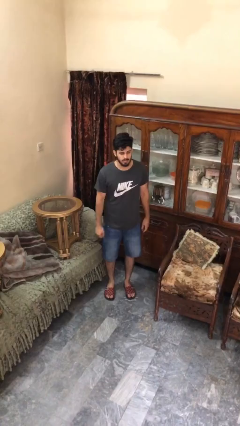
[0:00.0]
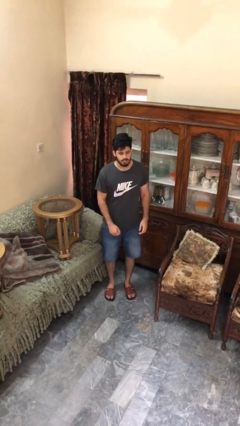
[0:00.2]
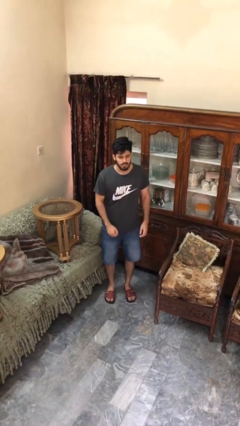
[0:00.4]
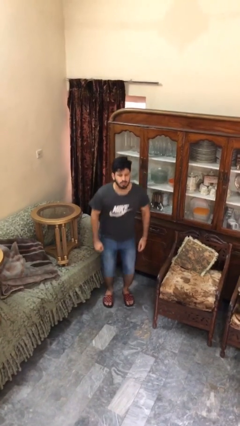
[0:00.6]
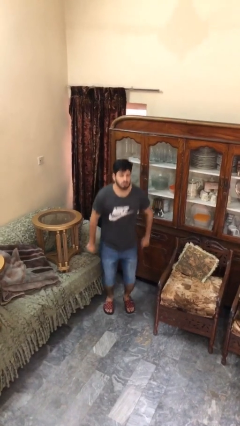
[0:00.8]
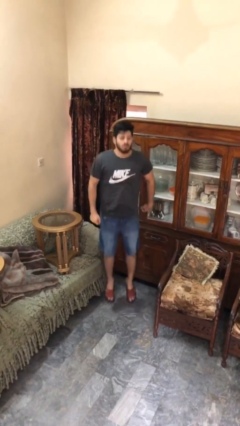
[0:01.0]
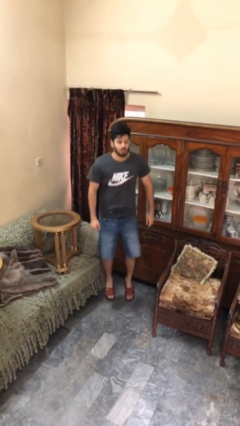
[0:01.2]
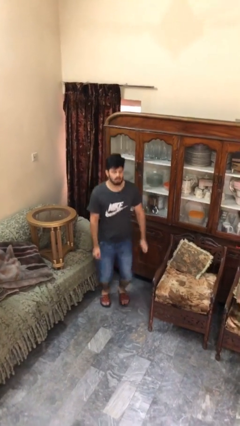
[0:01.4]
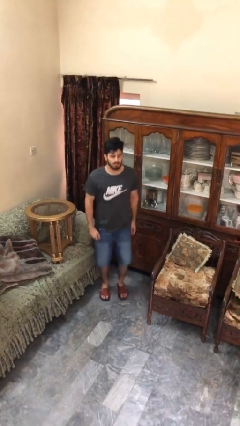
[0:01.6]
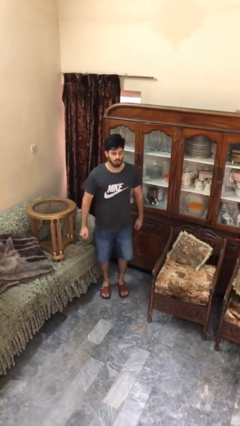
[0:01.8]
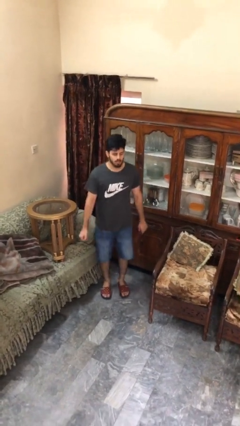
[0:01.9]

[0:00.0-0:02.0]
person jumps

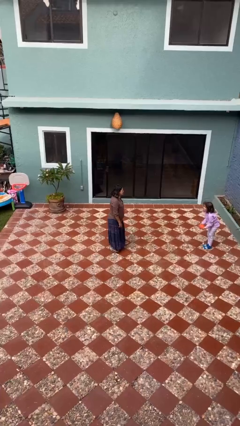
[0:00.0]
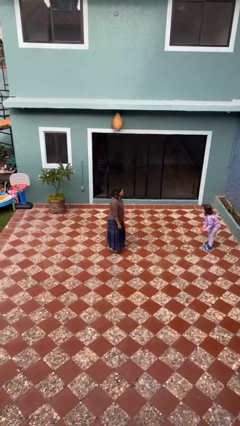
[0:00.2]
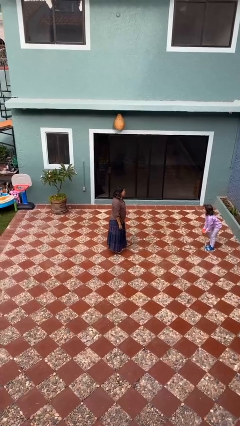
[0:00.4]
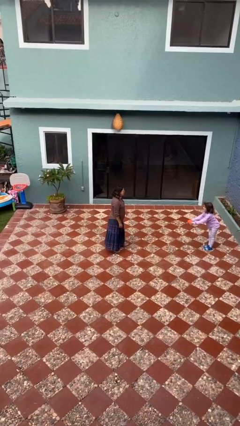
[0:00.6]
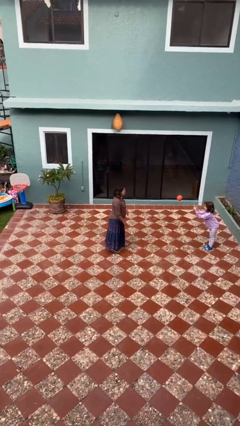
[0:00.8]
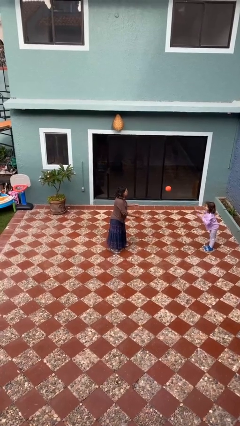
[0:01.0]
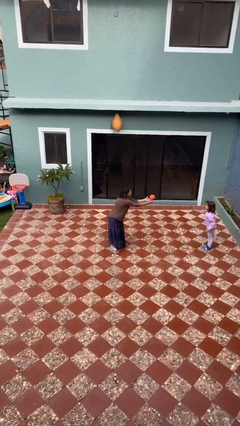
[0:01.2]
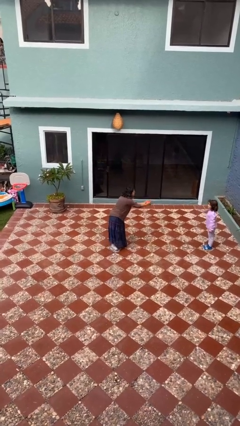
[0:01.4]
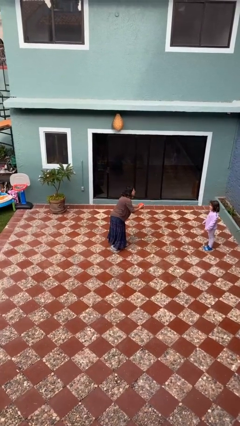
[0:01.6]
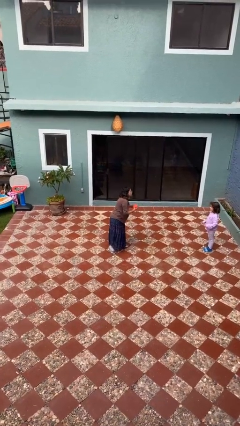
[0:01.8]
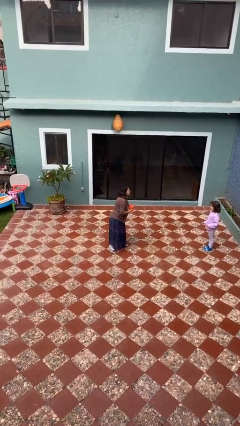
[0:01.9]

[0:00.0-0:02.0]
person catches object from person

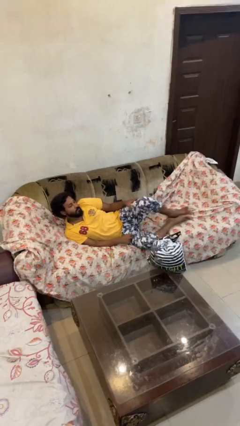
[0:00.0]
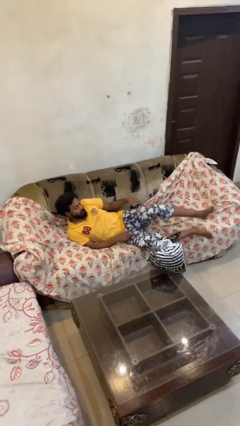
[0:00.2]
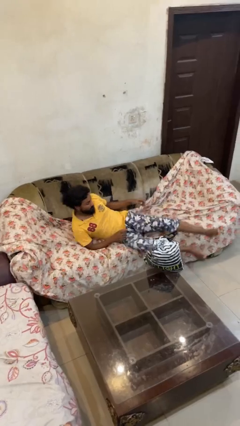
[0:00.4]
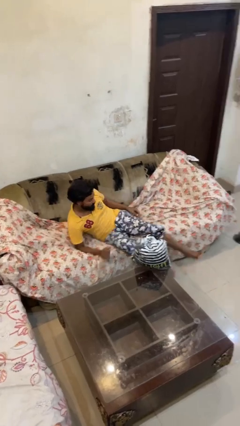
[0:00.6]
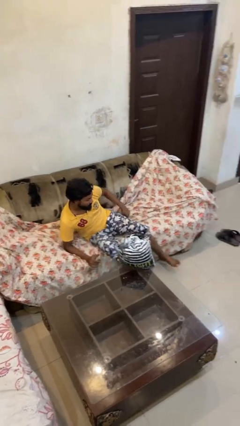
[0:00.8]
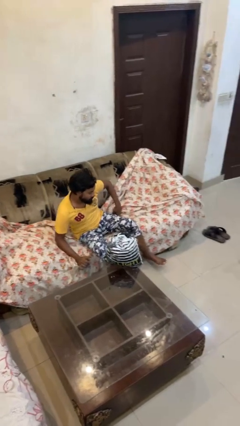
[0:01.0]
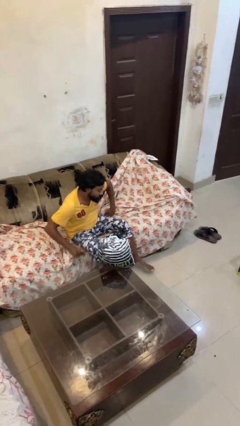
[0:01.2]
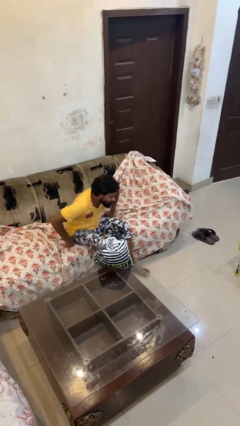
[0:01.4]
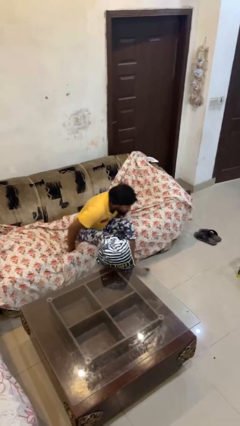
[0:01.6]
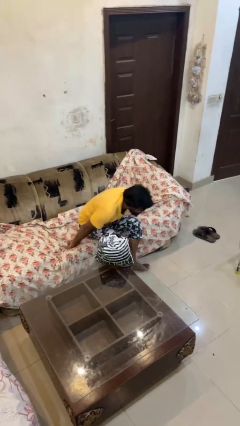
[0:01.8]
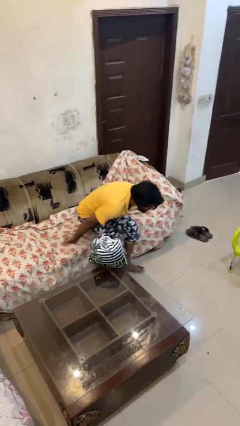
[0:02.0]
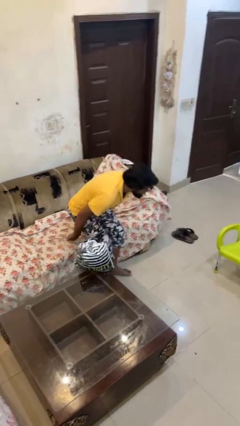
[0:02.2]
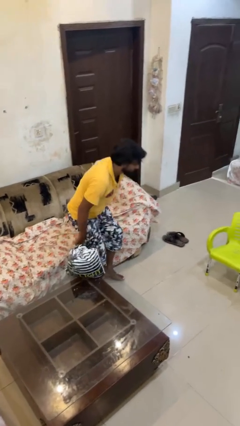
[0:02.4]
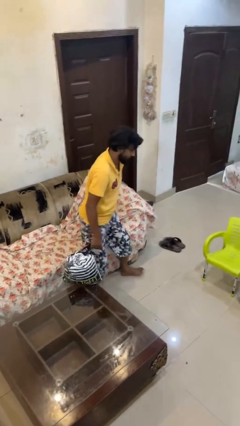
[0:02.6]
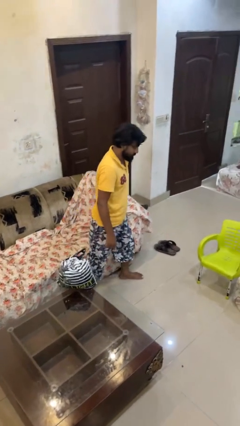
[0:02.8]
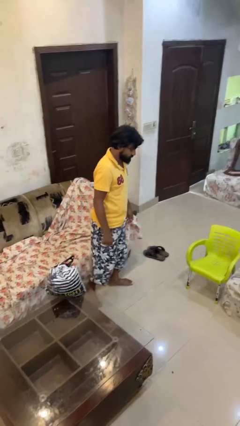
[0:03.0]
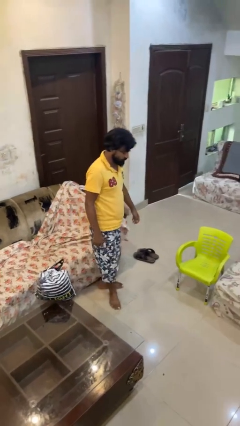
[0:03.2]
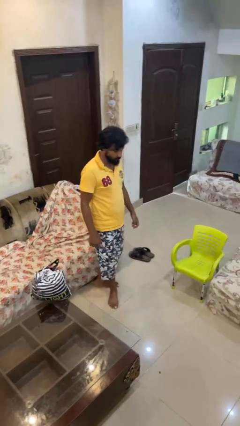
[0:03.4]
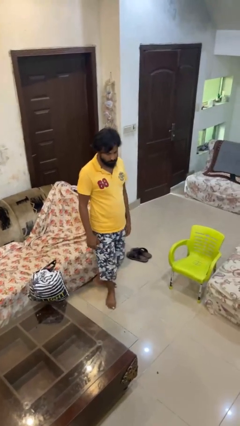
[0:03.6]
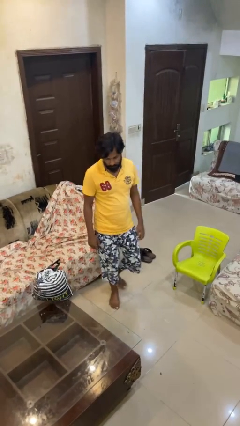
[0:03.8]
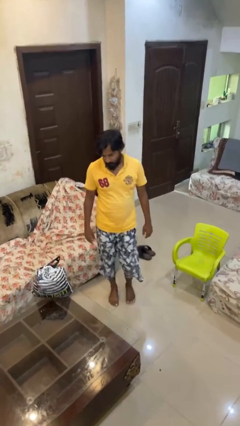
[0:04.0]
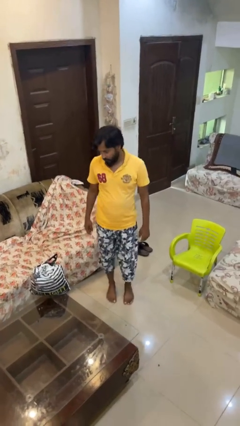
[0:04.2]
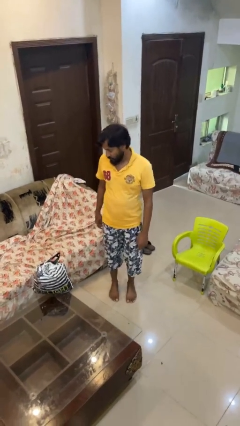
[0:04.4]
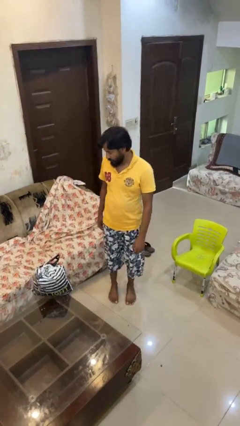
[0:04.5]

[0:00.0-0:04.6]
person stands up

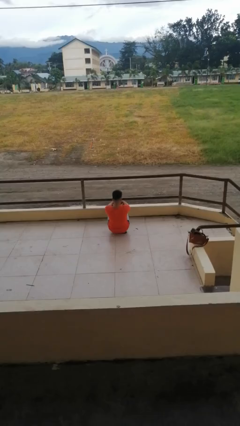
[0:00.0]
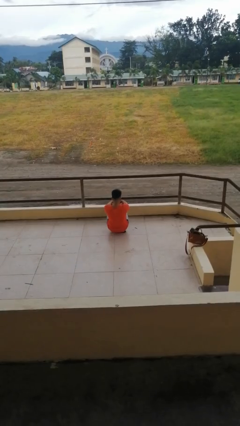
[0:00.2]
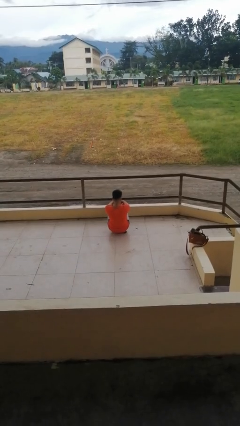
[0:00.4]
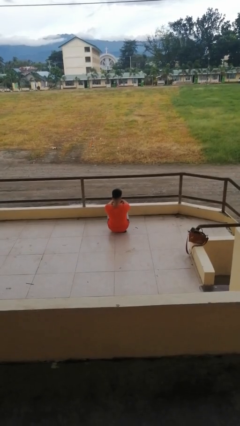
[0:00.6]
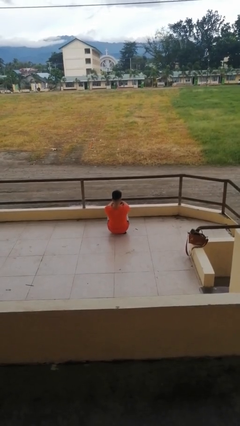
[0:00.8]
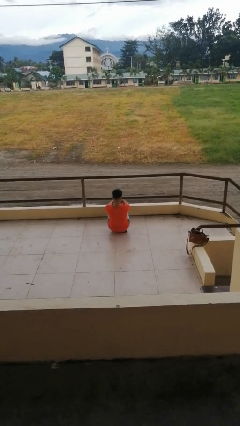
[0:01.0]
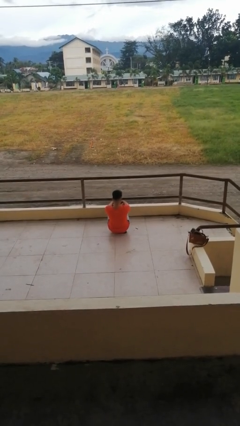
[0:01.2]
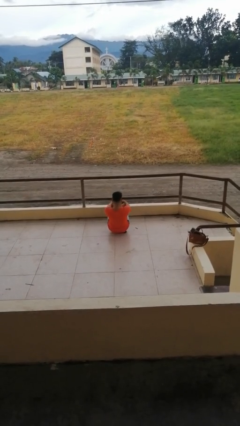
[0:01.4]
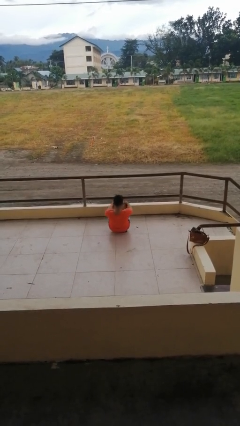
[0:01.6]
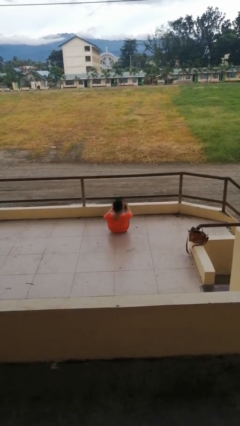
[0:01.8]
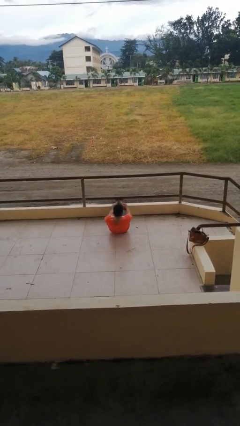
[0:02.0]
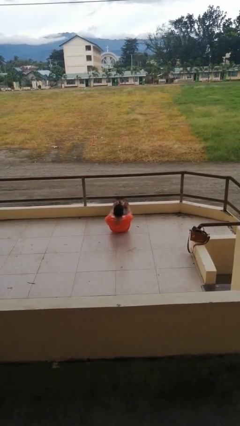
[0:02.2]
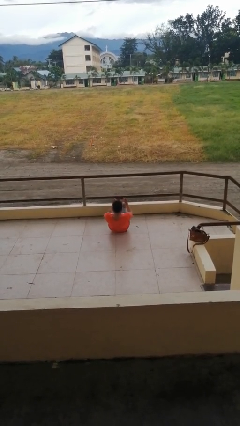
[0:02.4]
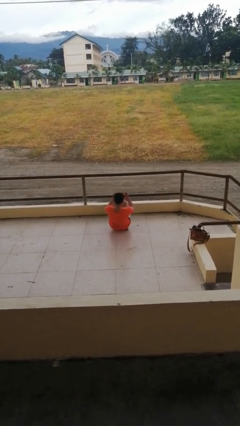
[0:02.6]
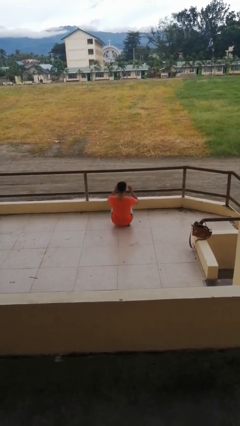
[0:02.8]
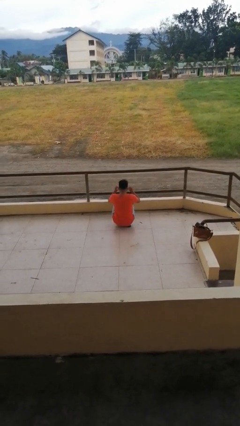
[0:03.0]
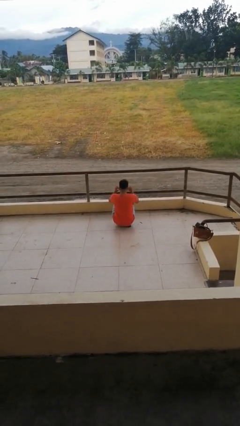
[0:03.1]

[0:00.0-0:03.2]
person exercises with situp

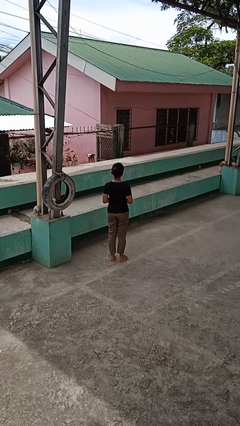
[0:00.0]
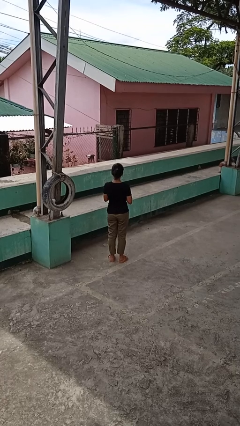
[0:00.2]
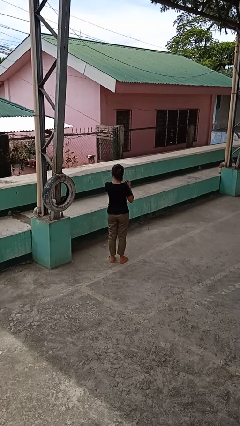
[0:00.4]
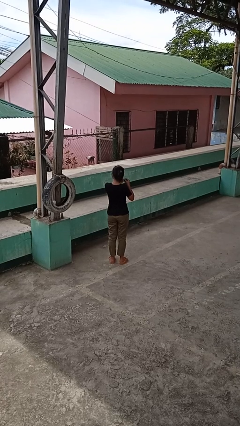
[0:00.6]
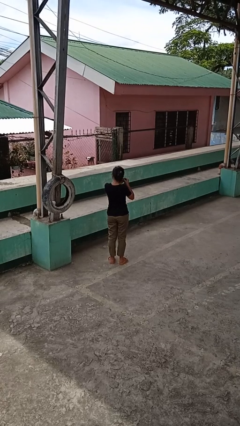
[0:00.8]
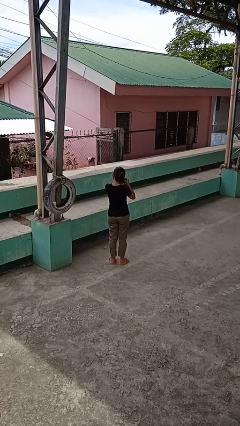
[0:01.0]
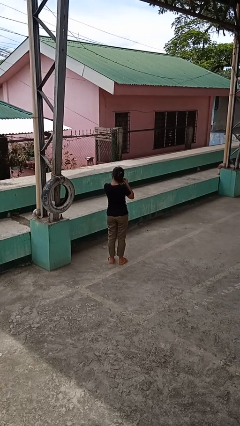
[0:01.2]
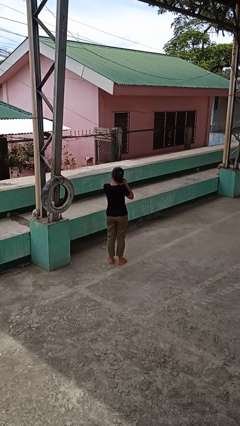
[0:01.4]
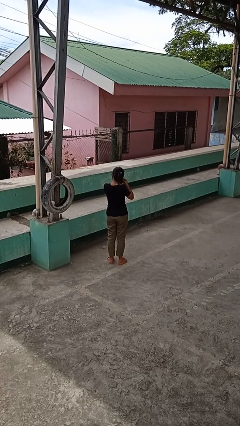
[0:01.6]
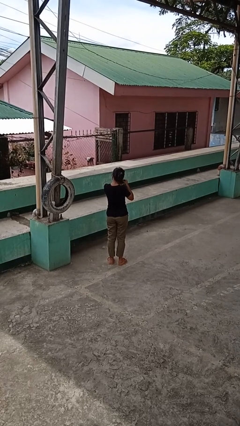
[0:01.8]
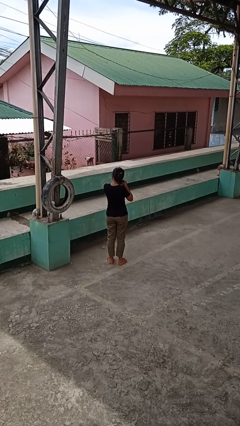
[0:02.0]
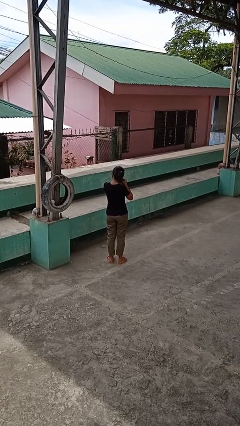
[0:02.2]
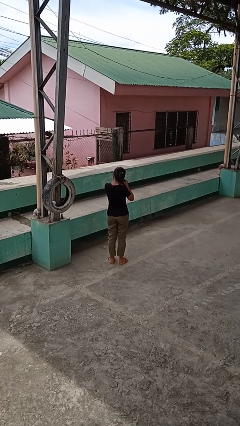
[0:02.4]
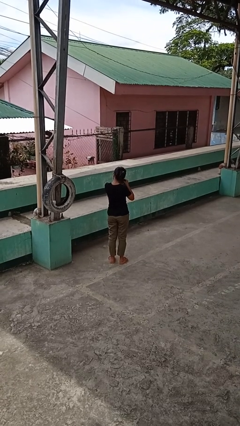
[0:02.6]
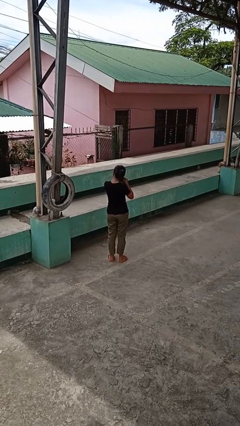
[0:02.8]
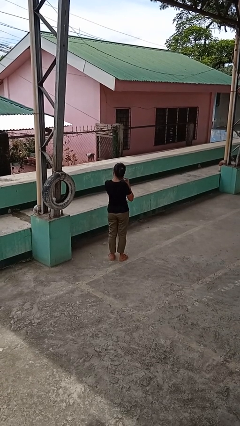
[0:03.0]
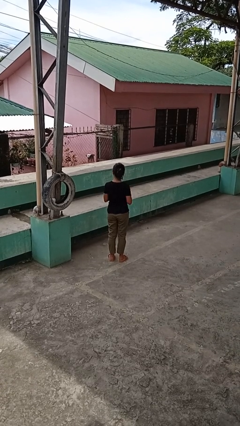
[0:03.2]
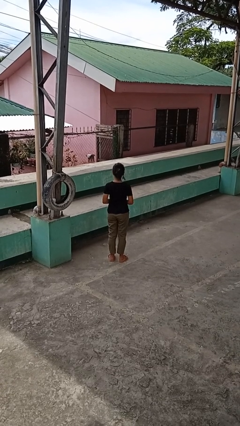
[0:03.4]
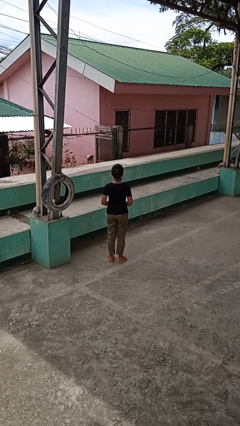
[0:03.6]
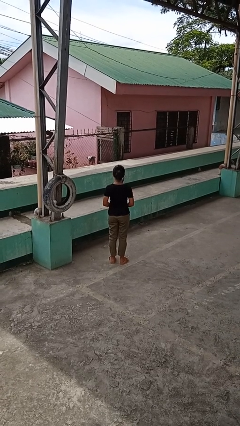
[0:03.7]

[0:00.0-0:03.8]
person puts on earrings

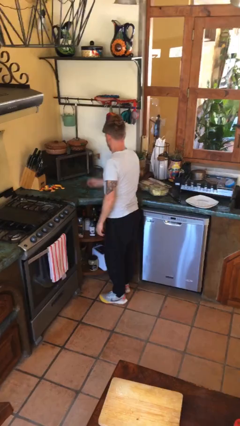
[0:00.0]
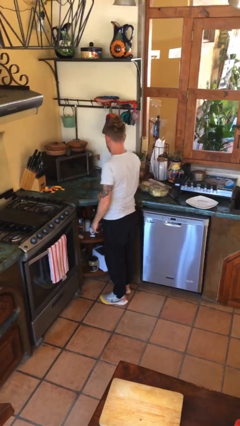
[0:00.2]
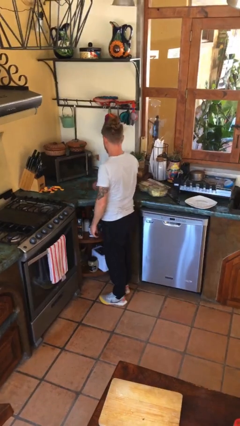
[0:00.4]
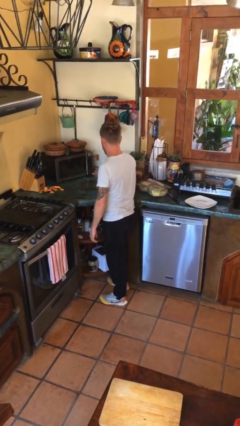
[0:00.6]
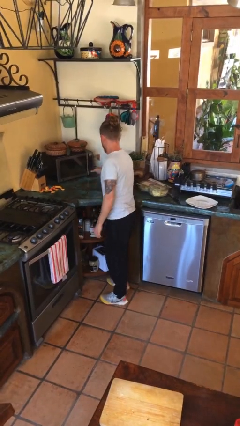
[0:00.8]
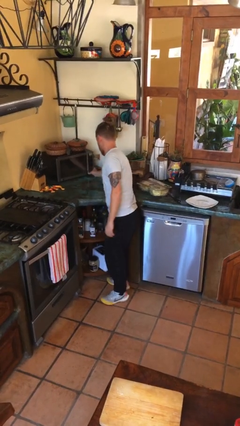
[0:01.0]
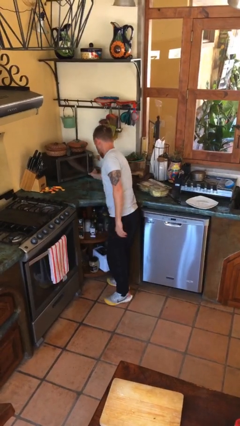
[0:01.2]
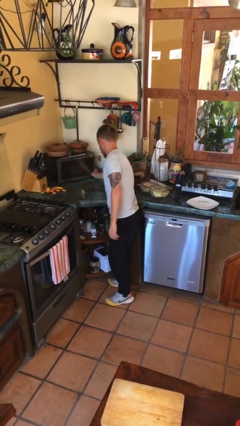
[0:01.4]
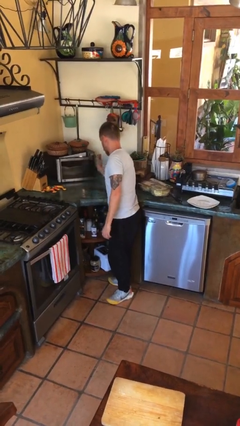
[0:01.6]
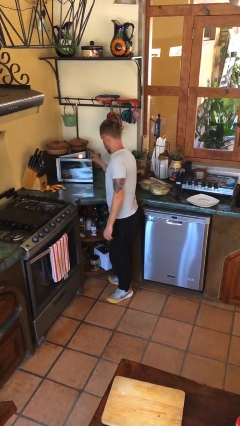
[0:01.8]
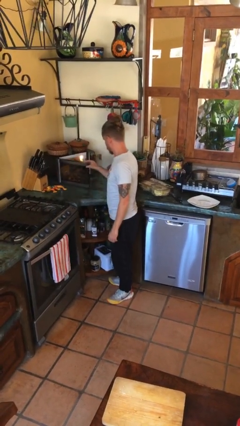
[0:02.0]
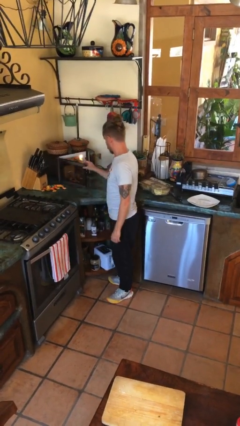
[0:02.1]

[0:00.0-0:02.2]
person opens microwave
